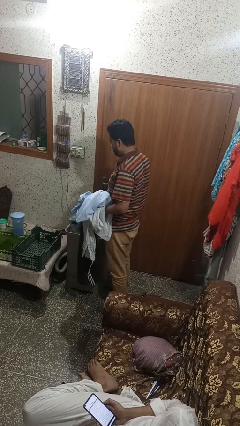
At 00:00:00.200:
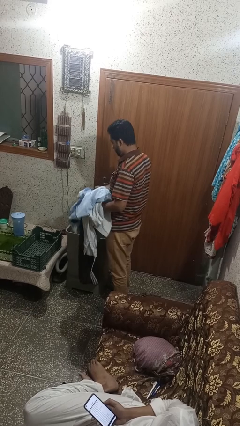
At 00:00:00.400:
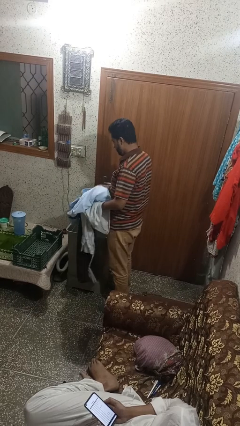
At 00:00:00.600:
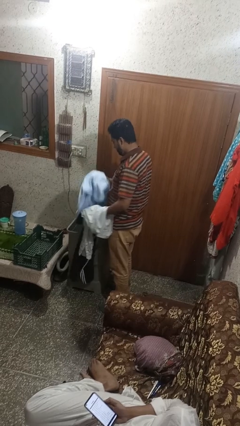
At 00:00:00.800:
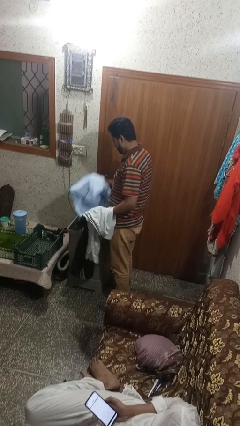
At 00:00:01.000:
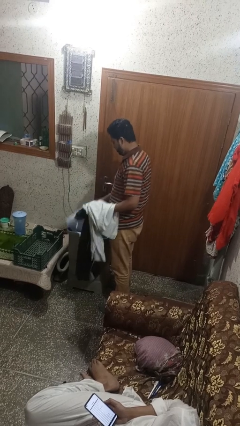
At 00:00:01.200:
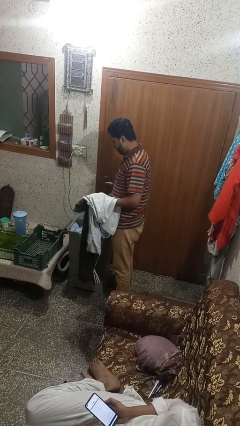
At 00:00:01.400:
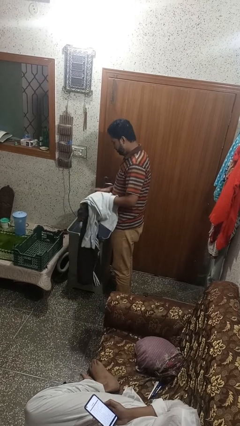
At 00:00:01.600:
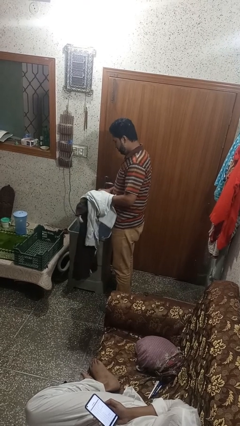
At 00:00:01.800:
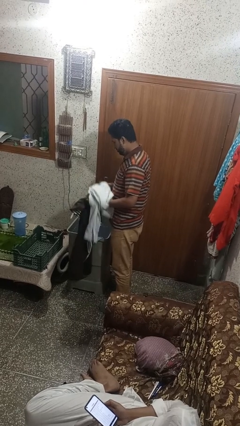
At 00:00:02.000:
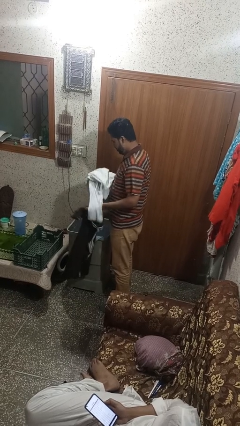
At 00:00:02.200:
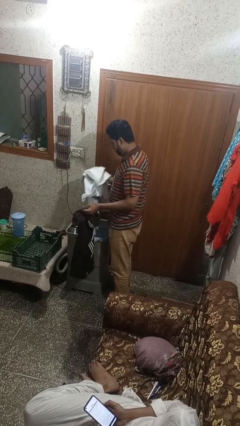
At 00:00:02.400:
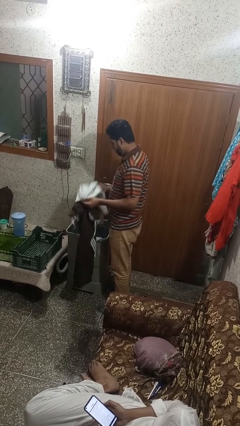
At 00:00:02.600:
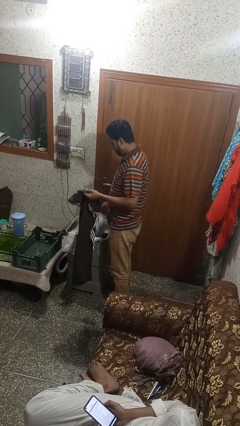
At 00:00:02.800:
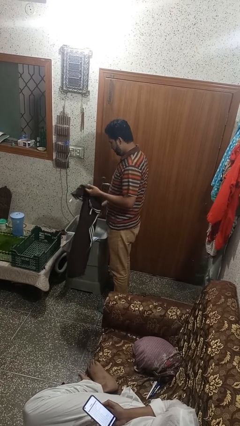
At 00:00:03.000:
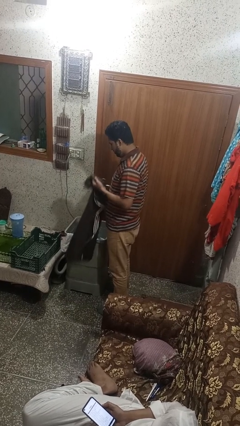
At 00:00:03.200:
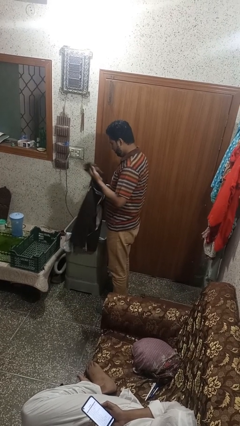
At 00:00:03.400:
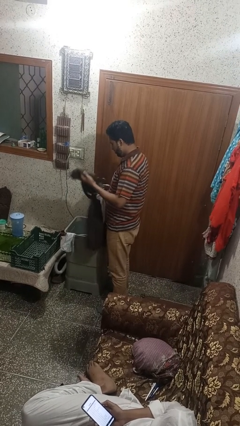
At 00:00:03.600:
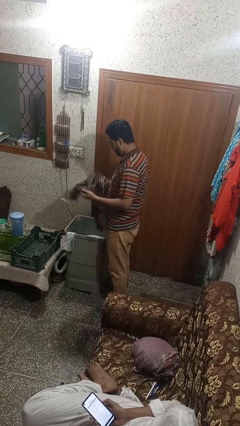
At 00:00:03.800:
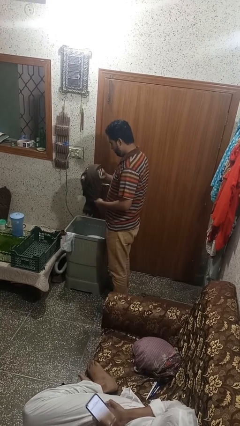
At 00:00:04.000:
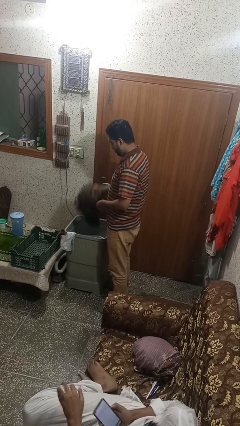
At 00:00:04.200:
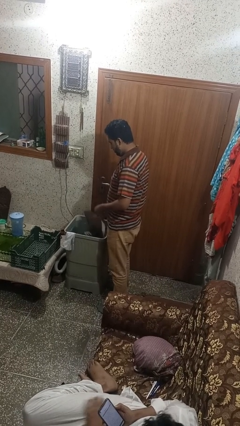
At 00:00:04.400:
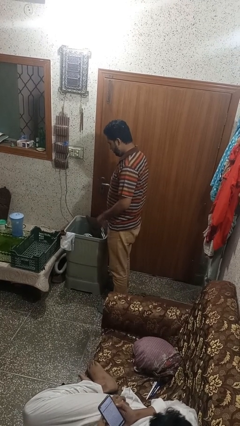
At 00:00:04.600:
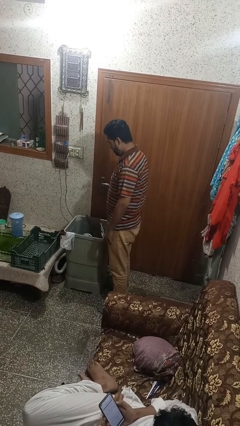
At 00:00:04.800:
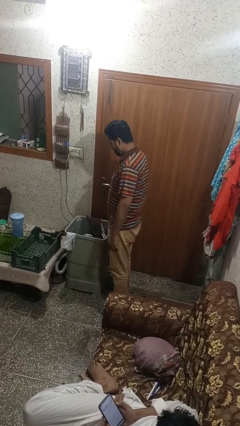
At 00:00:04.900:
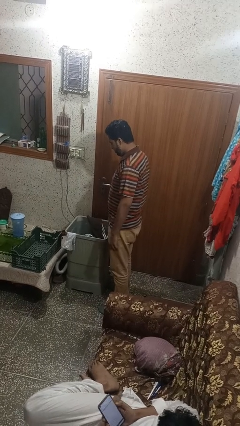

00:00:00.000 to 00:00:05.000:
person loads dryer

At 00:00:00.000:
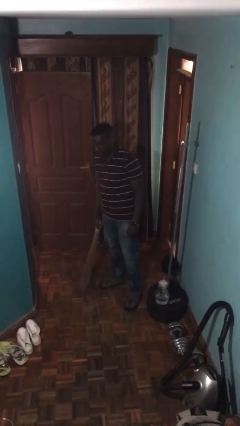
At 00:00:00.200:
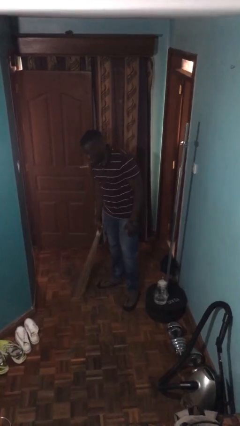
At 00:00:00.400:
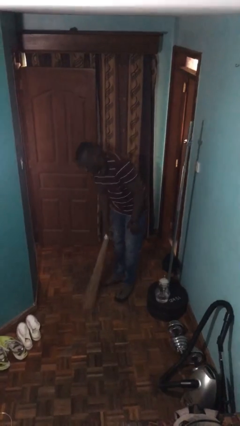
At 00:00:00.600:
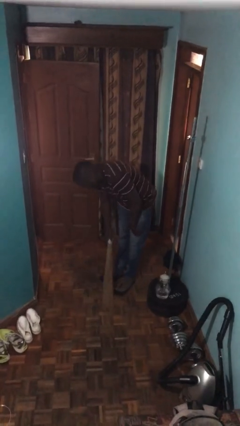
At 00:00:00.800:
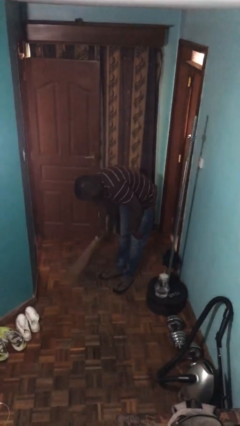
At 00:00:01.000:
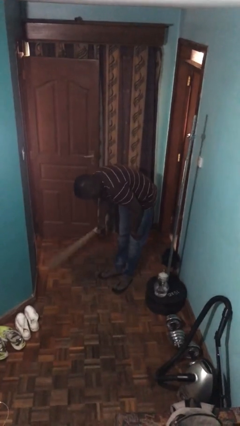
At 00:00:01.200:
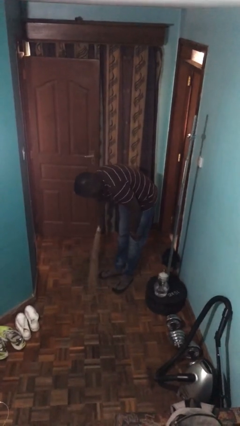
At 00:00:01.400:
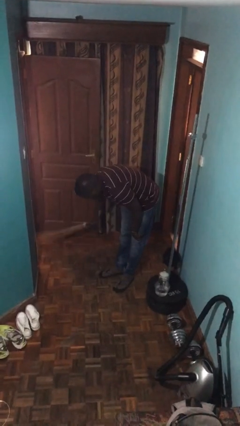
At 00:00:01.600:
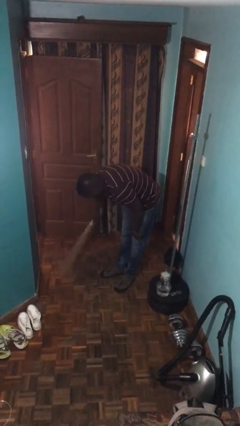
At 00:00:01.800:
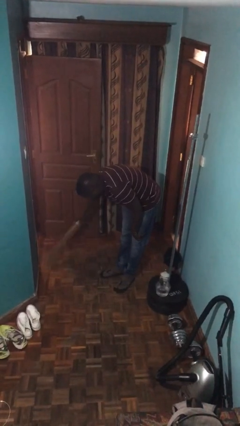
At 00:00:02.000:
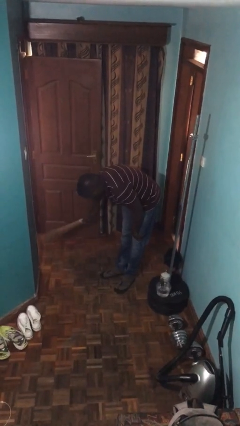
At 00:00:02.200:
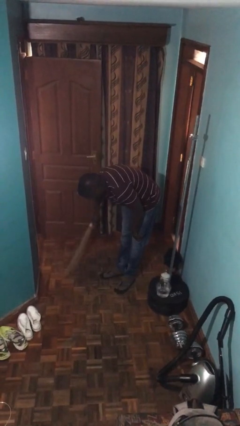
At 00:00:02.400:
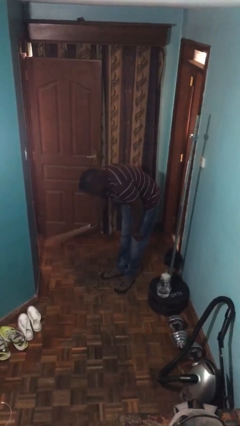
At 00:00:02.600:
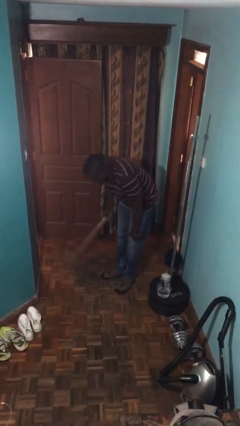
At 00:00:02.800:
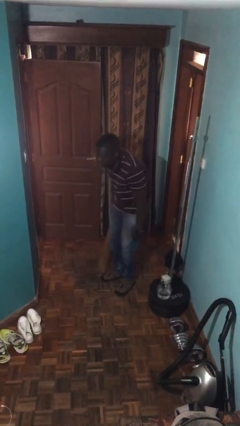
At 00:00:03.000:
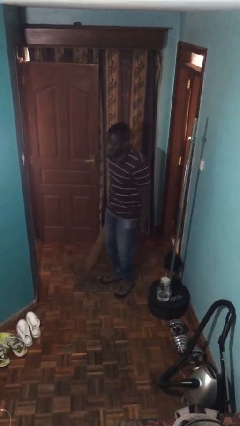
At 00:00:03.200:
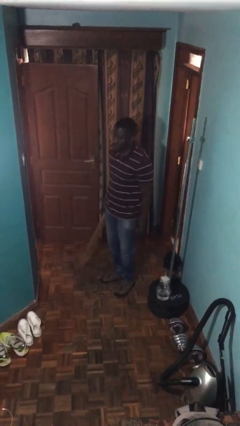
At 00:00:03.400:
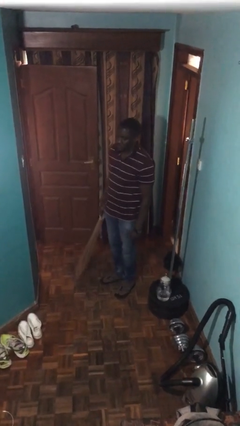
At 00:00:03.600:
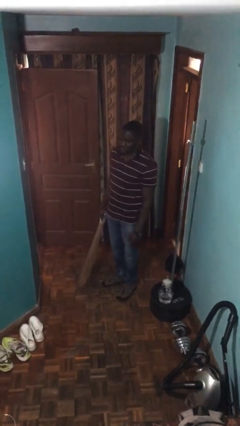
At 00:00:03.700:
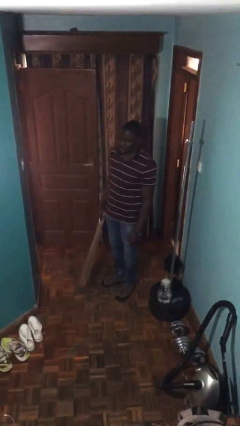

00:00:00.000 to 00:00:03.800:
person sweeps floor

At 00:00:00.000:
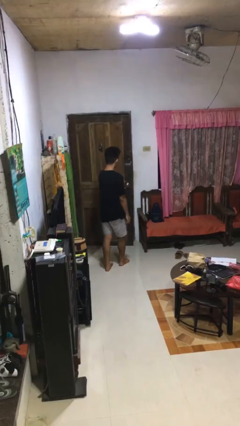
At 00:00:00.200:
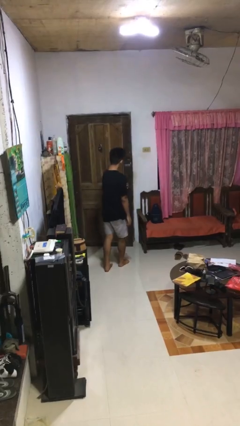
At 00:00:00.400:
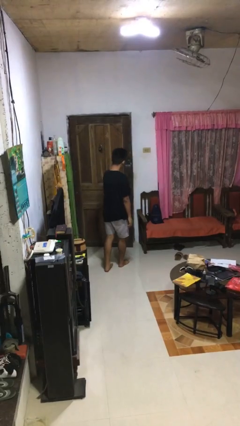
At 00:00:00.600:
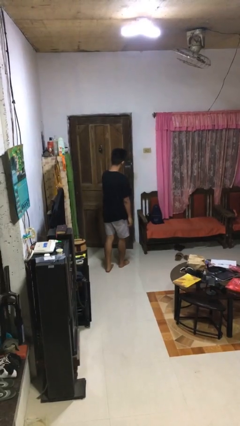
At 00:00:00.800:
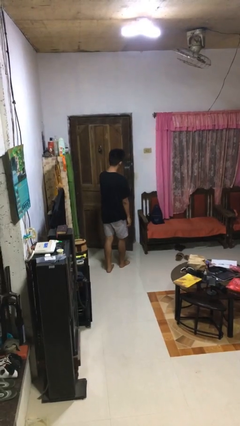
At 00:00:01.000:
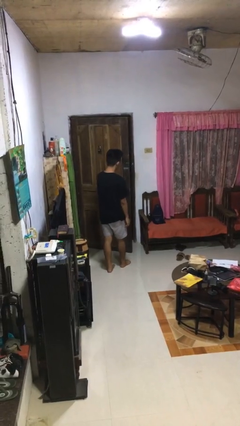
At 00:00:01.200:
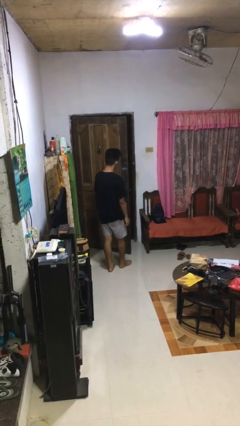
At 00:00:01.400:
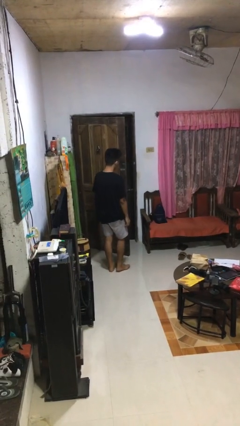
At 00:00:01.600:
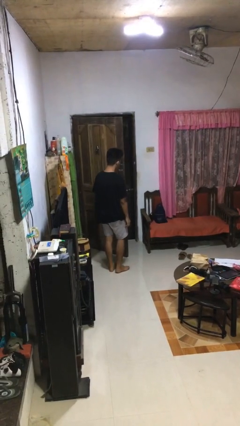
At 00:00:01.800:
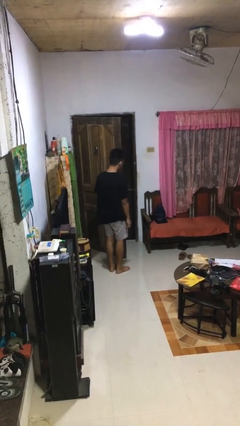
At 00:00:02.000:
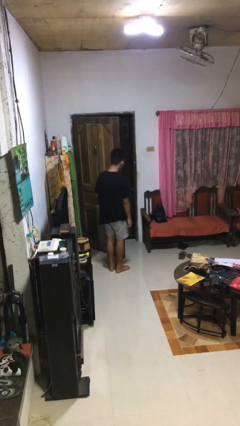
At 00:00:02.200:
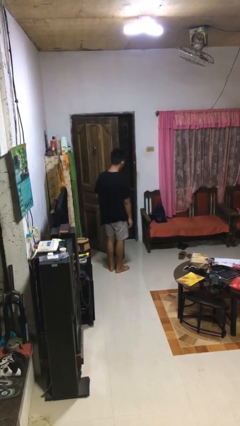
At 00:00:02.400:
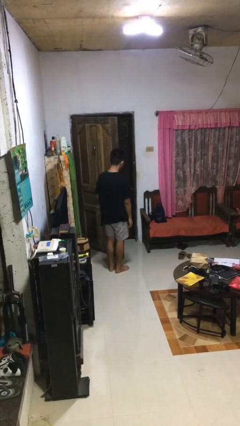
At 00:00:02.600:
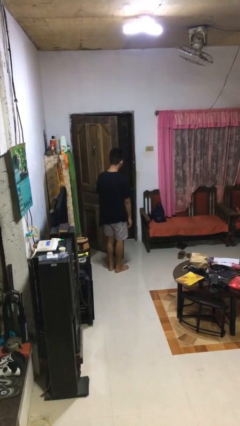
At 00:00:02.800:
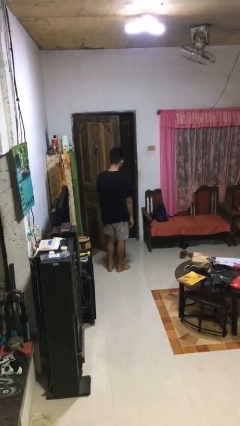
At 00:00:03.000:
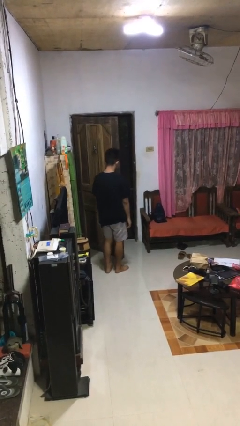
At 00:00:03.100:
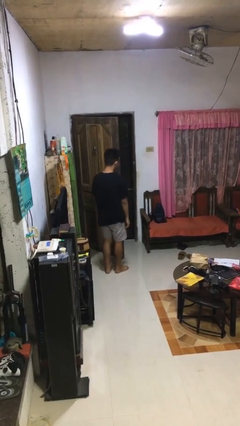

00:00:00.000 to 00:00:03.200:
person opens facility door

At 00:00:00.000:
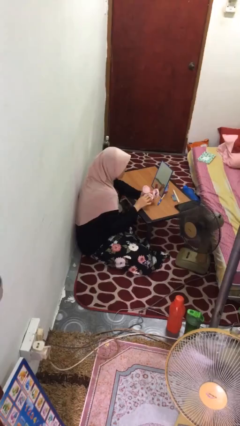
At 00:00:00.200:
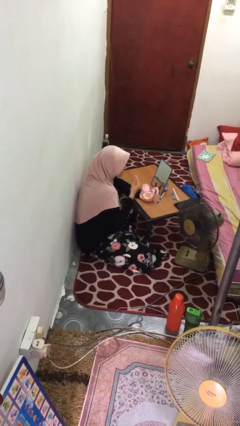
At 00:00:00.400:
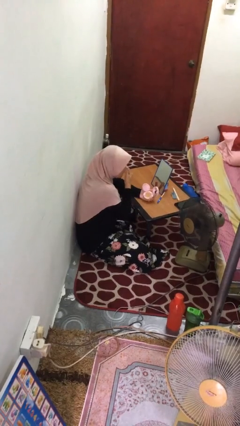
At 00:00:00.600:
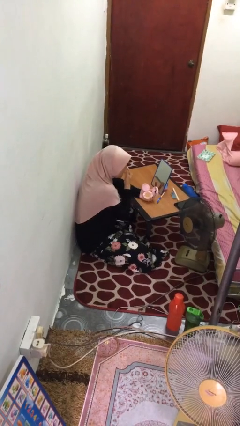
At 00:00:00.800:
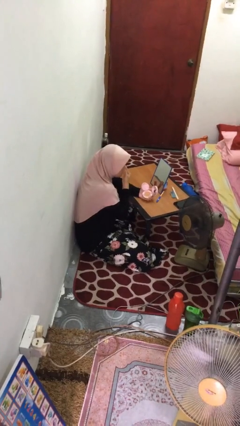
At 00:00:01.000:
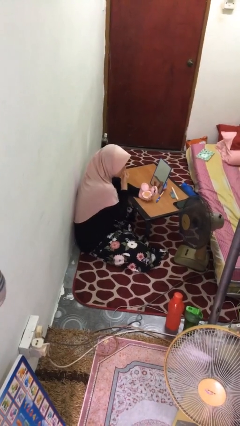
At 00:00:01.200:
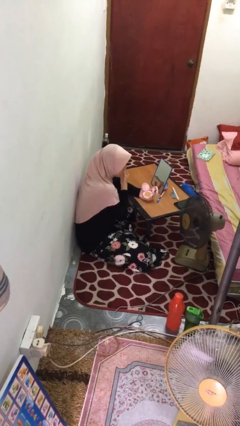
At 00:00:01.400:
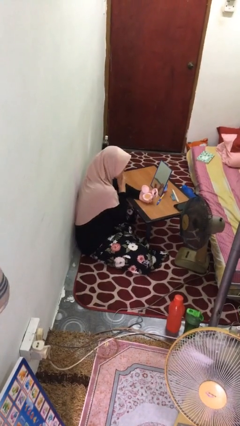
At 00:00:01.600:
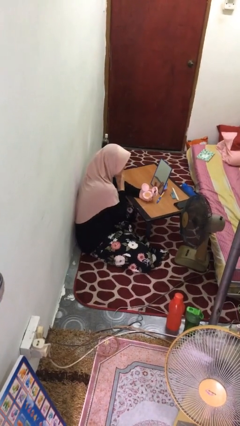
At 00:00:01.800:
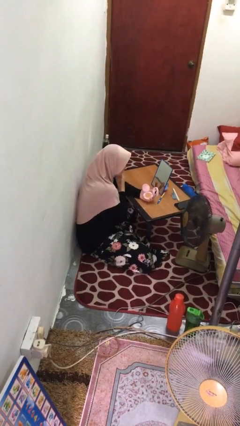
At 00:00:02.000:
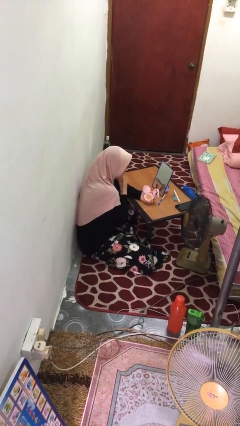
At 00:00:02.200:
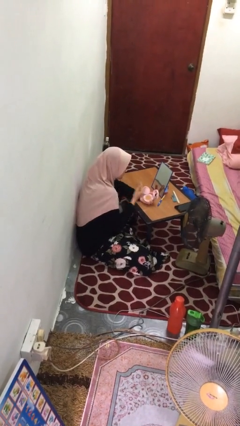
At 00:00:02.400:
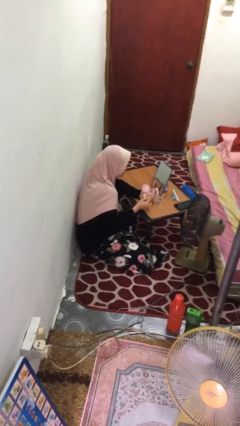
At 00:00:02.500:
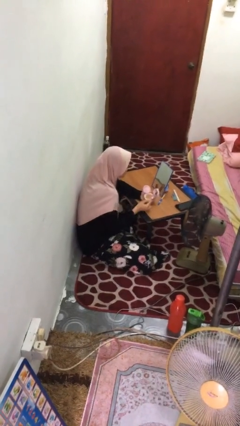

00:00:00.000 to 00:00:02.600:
person applies foundation makeup

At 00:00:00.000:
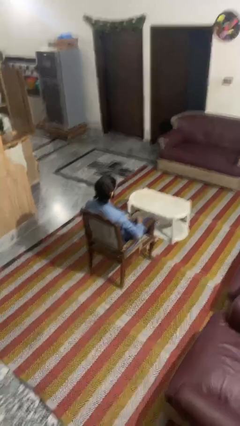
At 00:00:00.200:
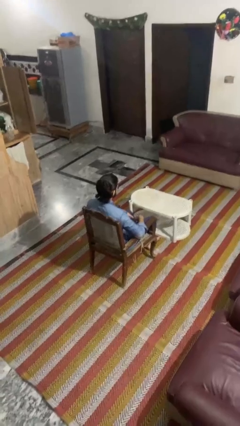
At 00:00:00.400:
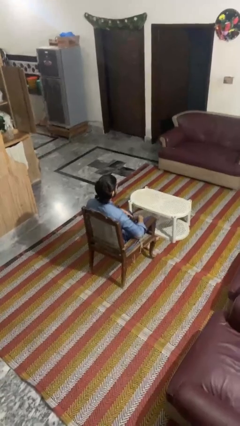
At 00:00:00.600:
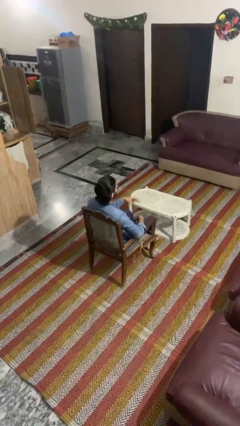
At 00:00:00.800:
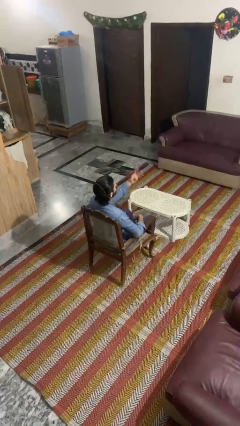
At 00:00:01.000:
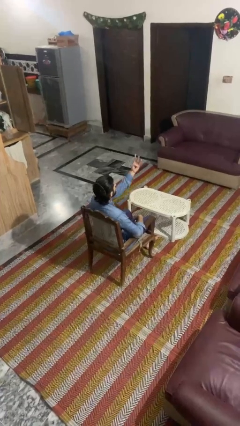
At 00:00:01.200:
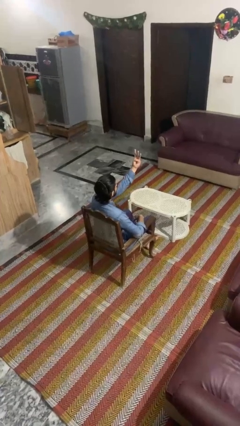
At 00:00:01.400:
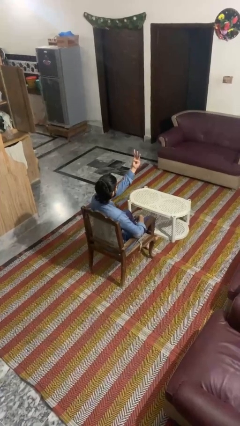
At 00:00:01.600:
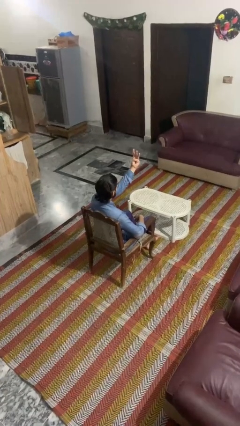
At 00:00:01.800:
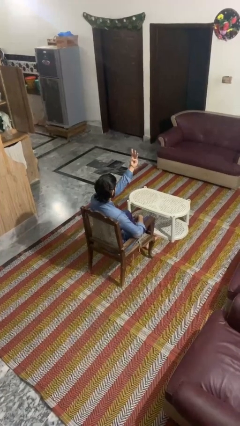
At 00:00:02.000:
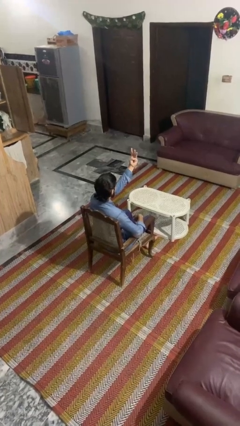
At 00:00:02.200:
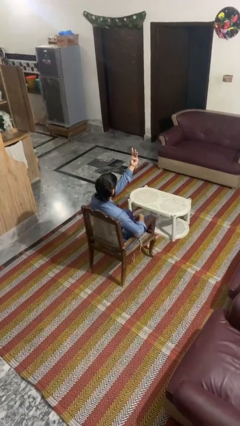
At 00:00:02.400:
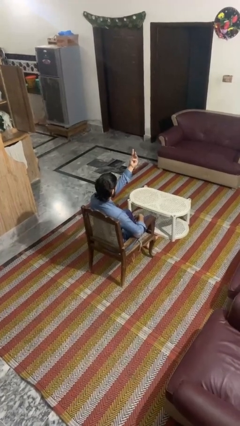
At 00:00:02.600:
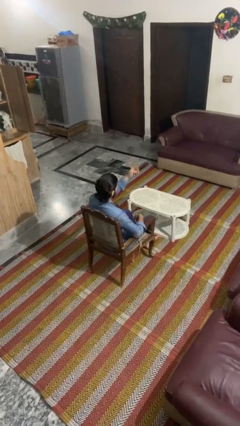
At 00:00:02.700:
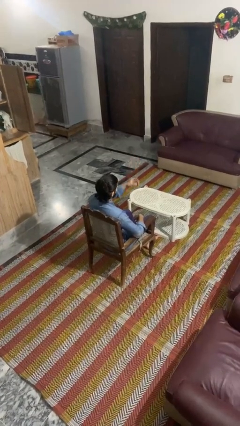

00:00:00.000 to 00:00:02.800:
person gestures number three
